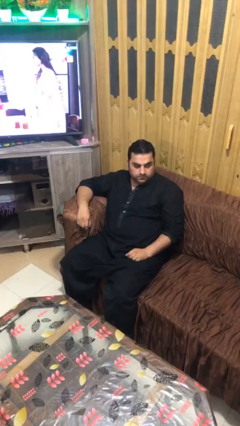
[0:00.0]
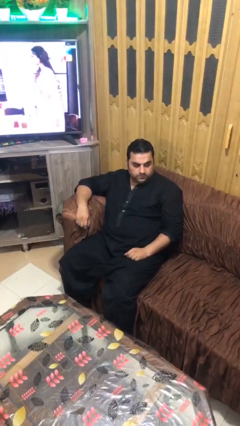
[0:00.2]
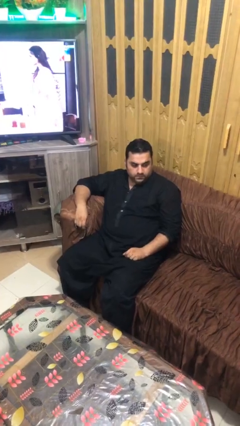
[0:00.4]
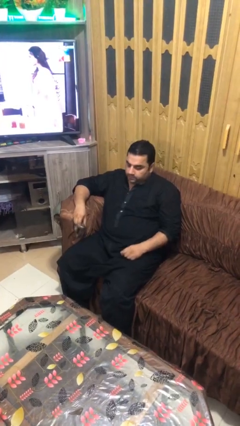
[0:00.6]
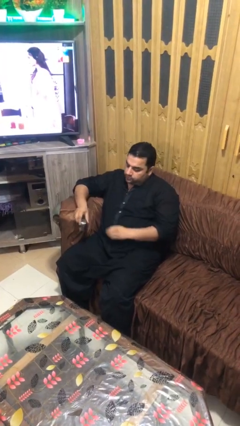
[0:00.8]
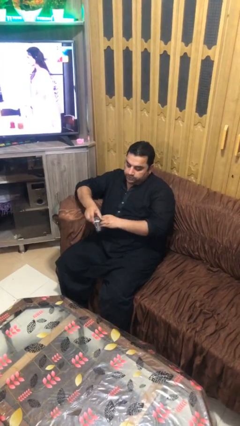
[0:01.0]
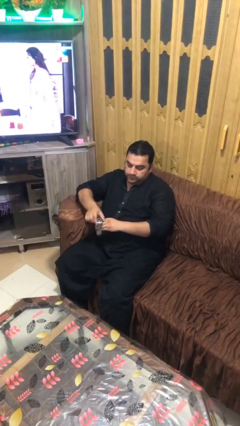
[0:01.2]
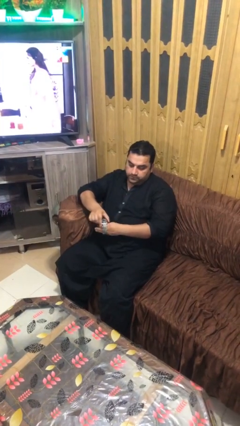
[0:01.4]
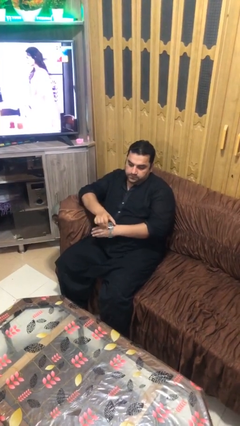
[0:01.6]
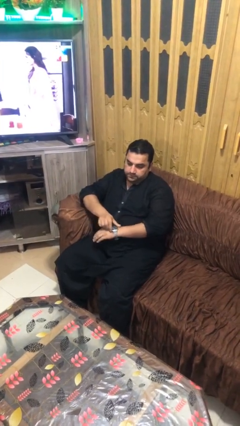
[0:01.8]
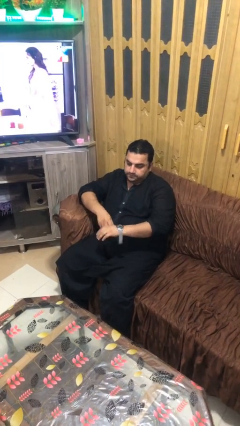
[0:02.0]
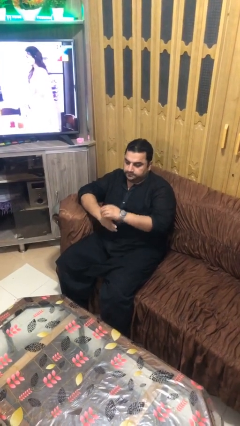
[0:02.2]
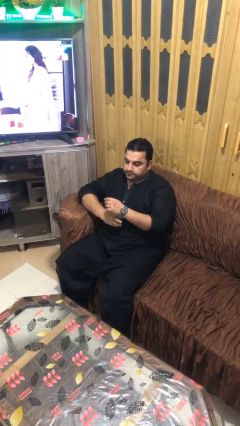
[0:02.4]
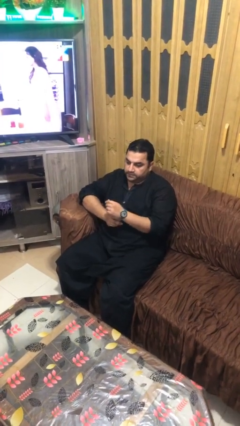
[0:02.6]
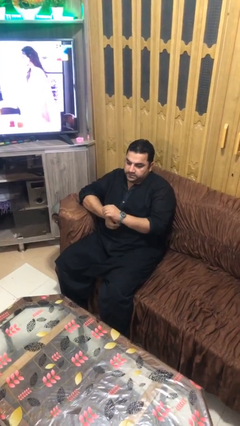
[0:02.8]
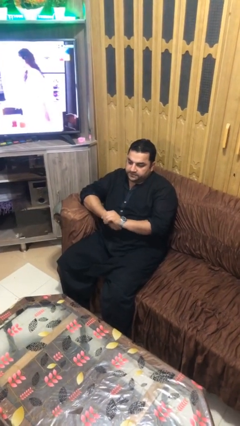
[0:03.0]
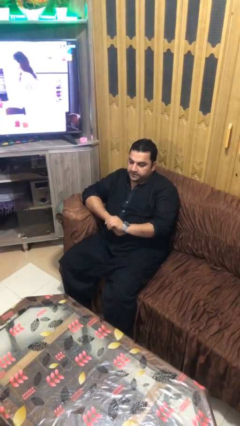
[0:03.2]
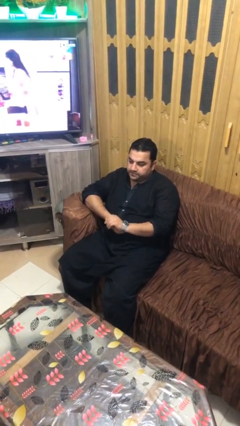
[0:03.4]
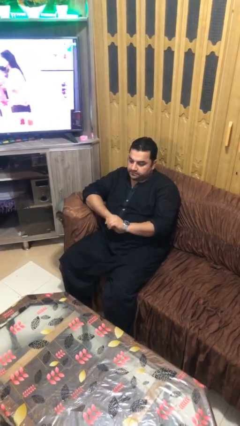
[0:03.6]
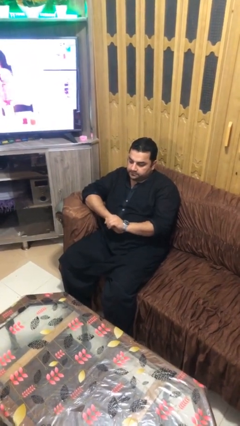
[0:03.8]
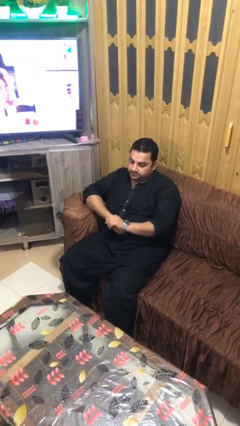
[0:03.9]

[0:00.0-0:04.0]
person puts on wristwatch

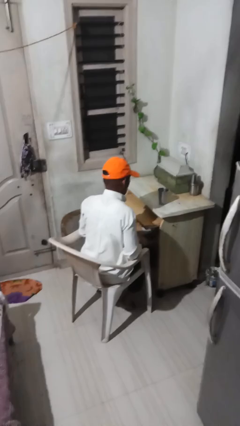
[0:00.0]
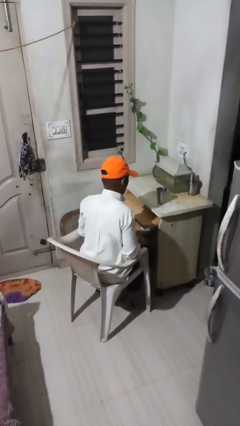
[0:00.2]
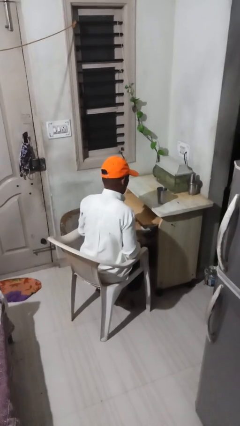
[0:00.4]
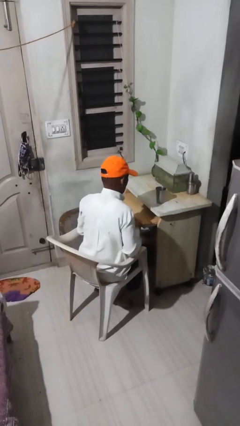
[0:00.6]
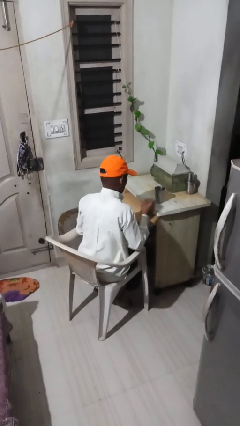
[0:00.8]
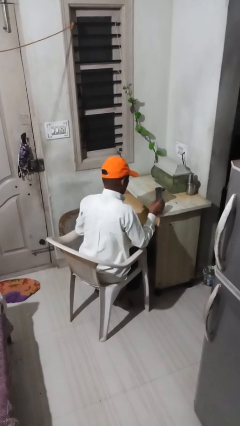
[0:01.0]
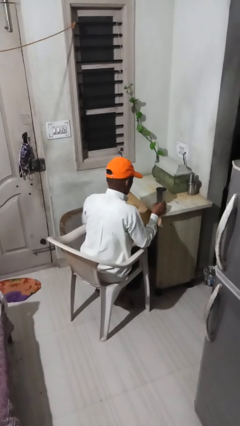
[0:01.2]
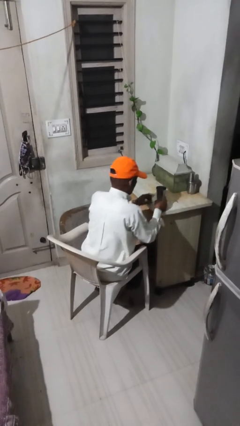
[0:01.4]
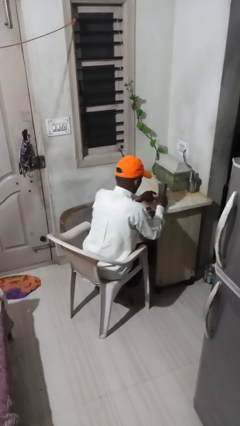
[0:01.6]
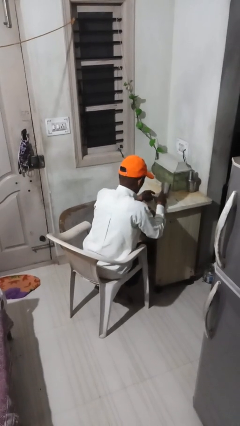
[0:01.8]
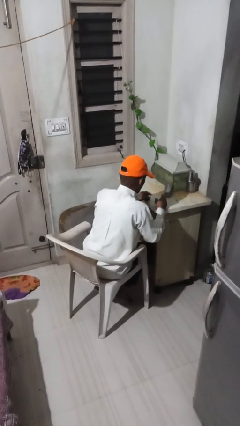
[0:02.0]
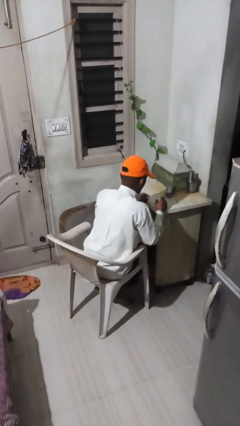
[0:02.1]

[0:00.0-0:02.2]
person knocks over glass

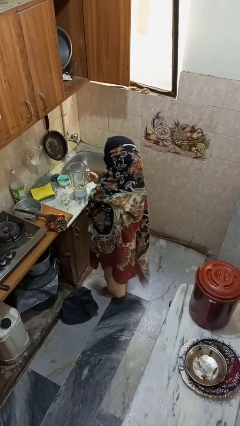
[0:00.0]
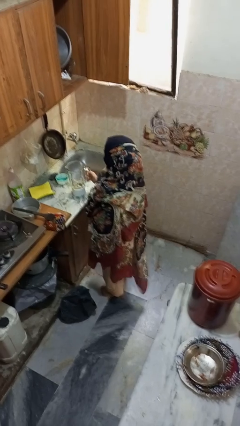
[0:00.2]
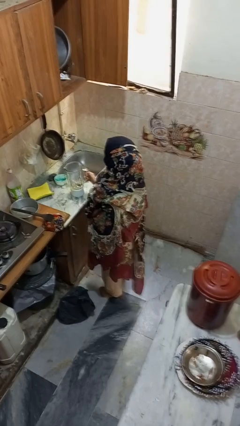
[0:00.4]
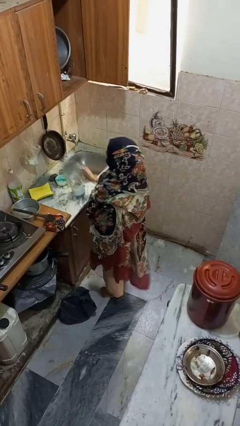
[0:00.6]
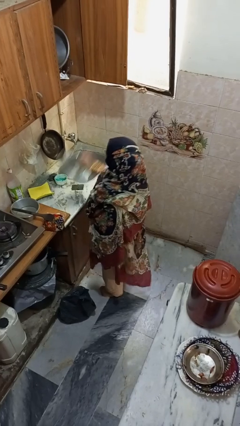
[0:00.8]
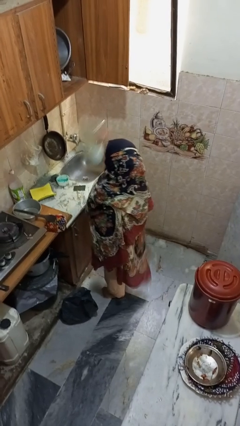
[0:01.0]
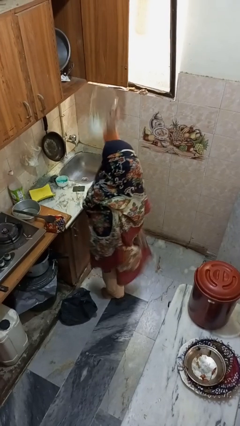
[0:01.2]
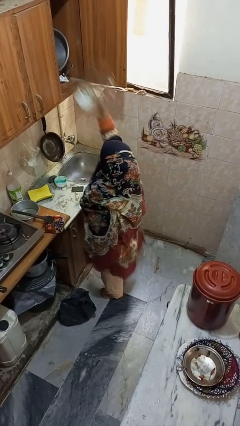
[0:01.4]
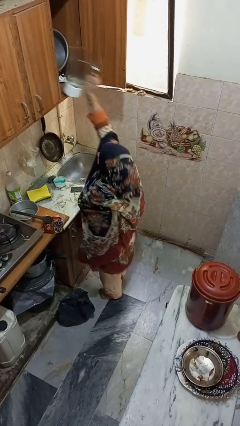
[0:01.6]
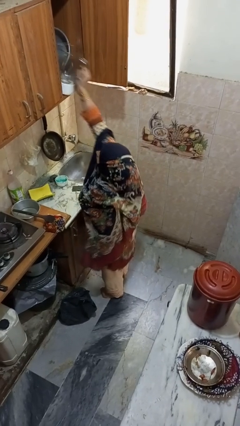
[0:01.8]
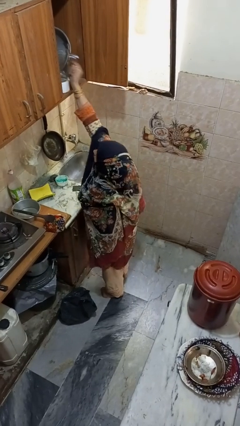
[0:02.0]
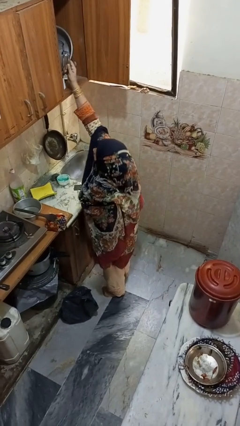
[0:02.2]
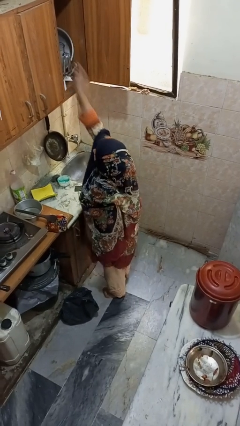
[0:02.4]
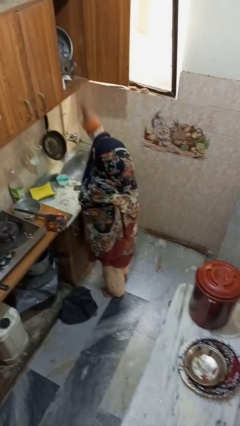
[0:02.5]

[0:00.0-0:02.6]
person takes object from cabinet

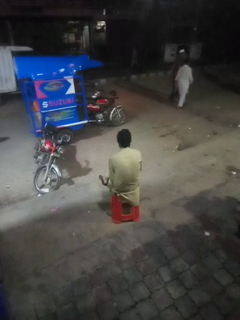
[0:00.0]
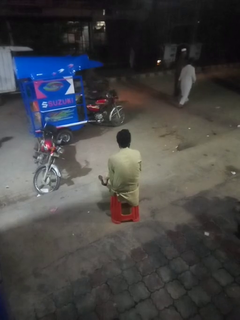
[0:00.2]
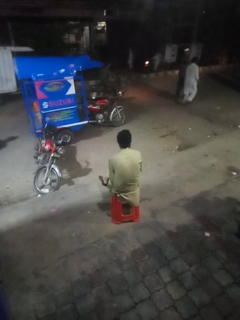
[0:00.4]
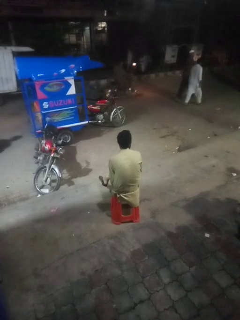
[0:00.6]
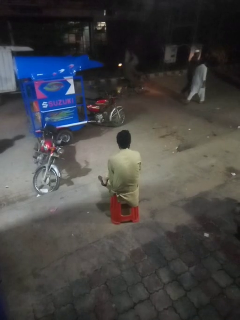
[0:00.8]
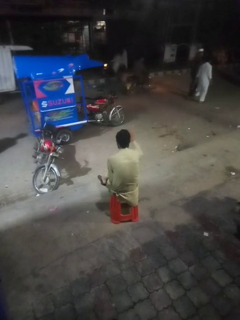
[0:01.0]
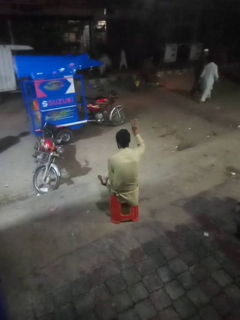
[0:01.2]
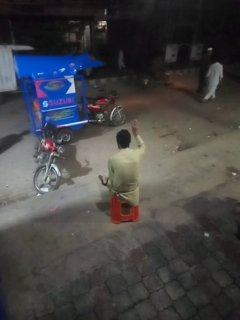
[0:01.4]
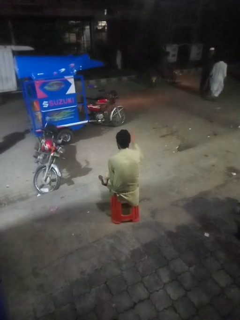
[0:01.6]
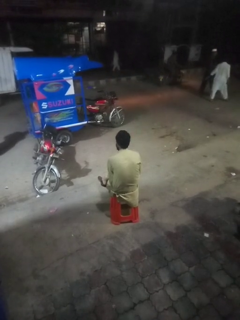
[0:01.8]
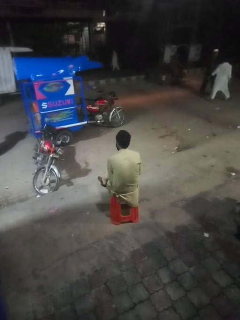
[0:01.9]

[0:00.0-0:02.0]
person gestures number three

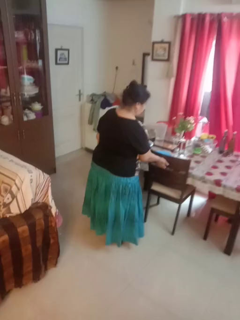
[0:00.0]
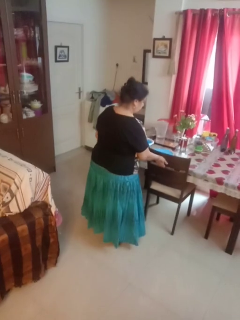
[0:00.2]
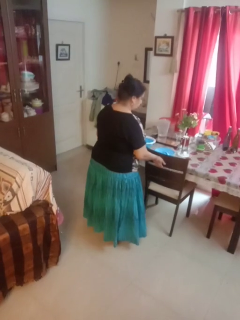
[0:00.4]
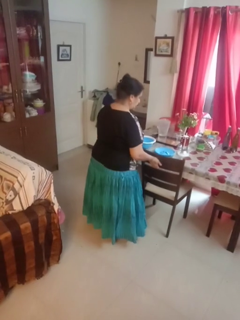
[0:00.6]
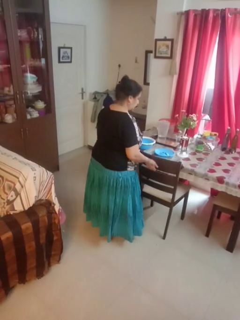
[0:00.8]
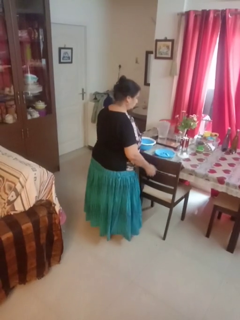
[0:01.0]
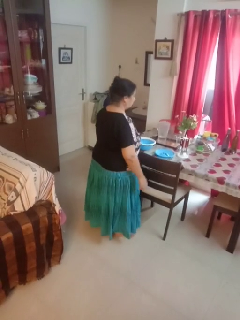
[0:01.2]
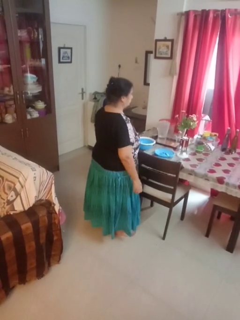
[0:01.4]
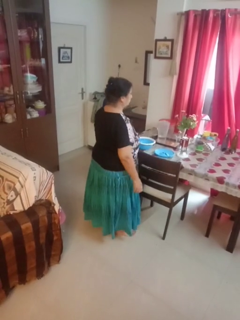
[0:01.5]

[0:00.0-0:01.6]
person pulls out chair

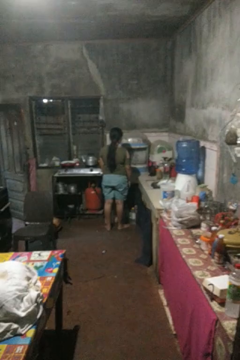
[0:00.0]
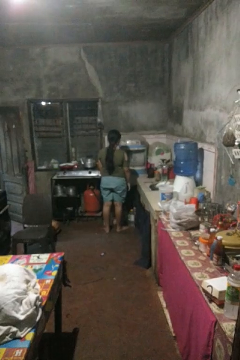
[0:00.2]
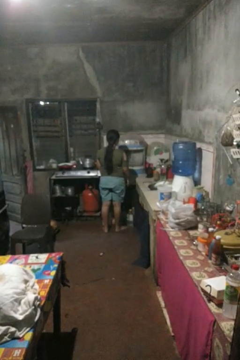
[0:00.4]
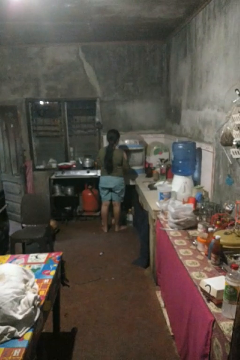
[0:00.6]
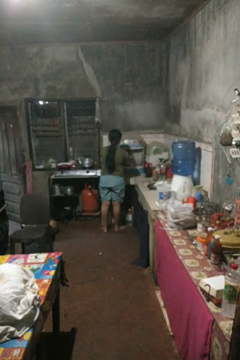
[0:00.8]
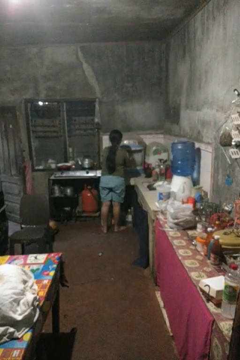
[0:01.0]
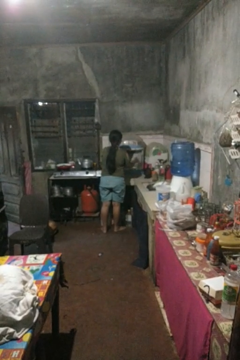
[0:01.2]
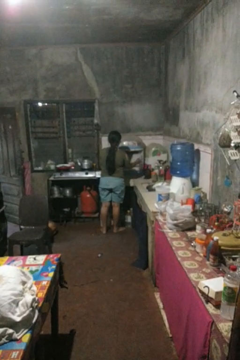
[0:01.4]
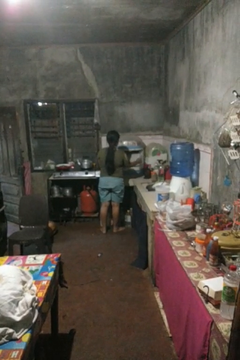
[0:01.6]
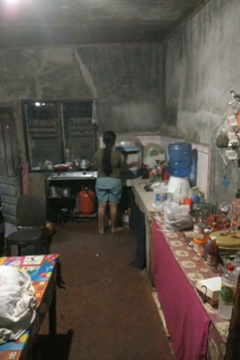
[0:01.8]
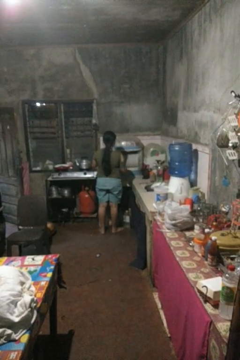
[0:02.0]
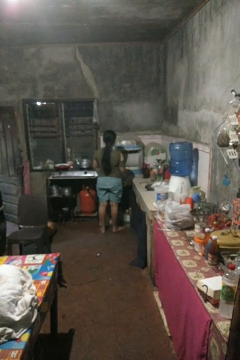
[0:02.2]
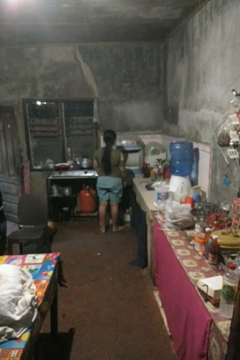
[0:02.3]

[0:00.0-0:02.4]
person opens kitchen drawer

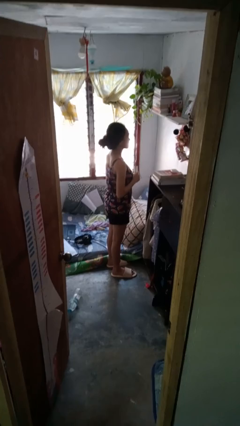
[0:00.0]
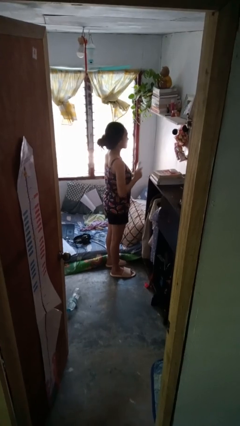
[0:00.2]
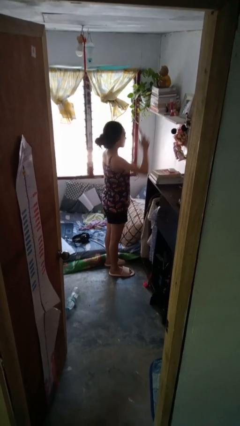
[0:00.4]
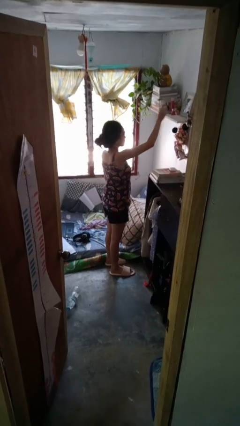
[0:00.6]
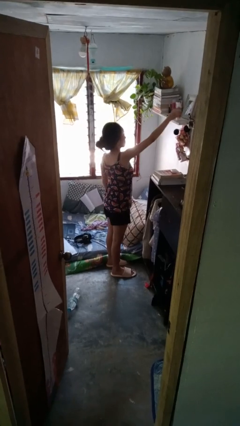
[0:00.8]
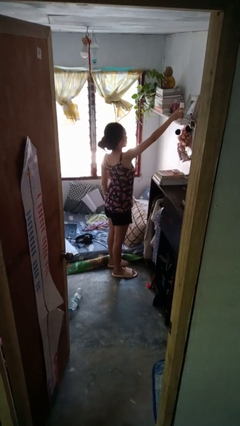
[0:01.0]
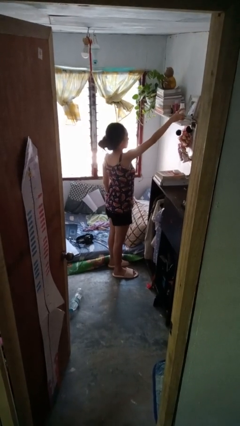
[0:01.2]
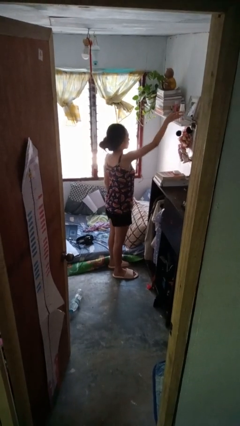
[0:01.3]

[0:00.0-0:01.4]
person puts down object on shelf

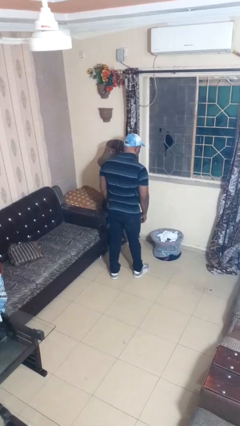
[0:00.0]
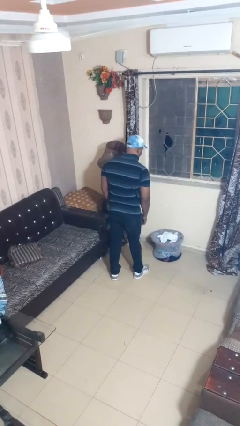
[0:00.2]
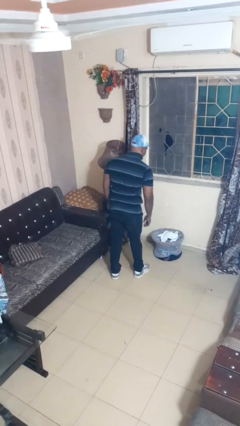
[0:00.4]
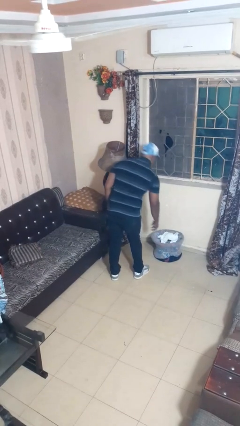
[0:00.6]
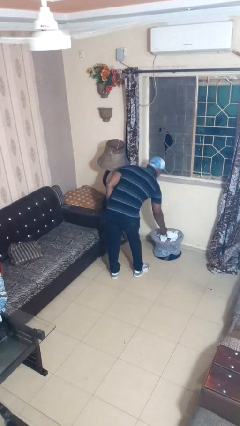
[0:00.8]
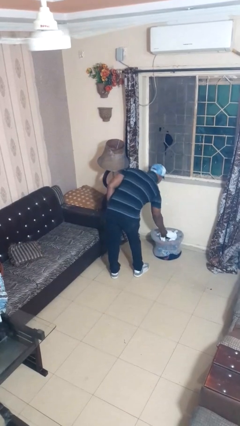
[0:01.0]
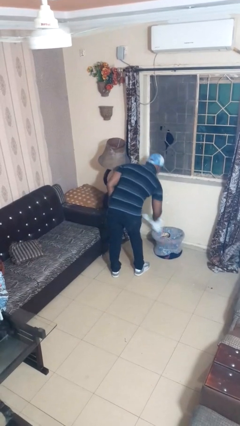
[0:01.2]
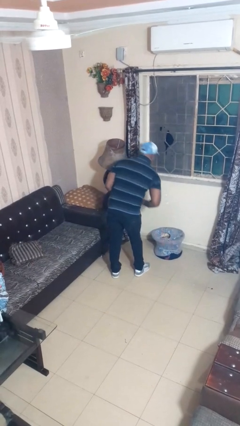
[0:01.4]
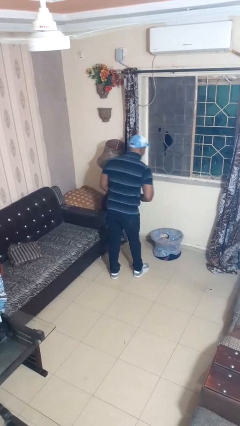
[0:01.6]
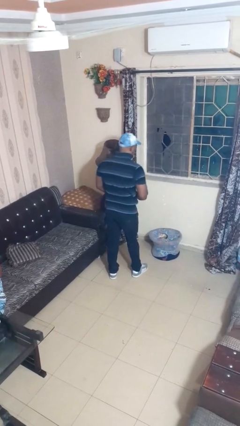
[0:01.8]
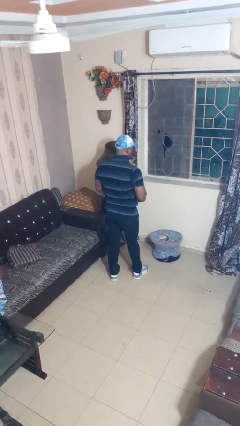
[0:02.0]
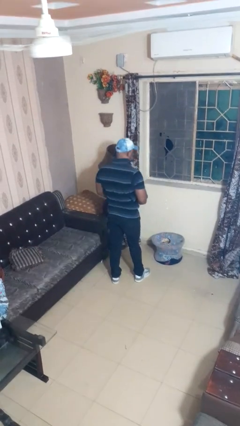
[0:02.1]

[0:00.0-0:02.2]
person takes object from basket
